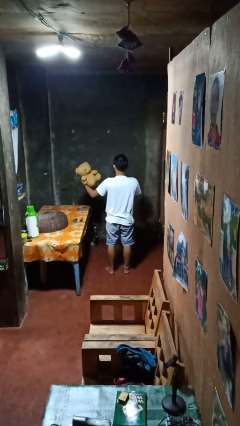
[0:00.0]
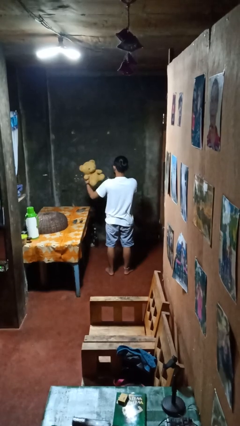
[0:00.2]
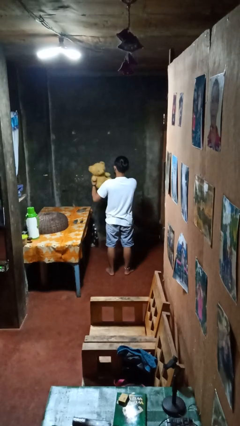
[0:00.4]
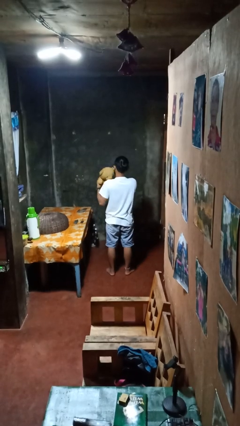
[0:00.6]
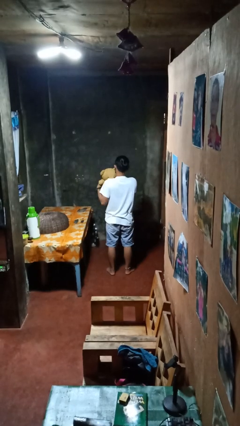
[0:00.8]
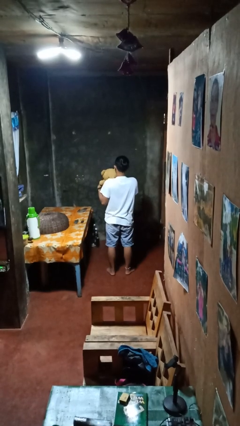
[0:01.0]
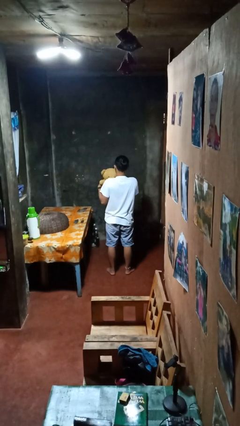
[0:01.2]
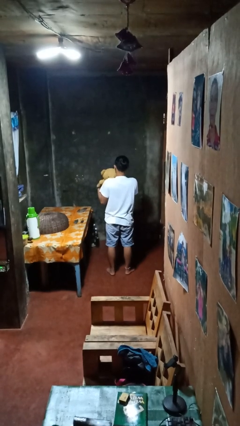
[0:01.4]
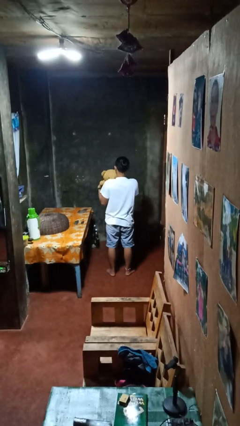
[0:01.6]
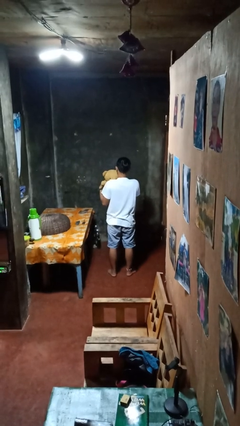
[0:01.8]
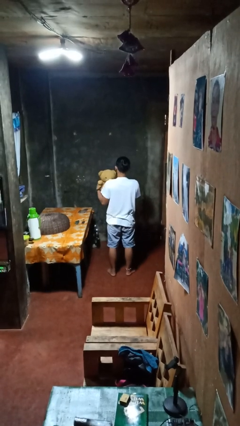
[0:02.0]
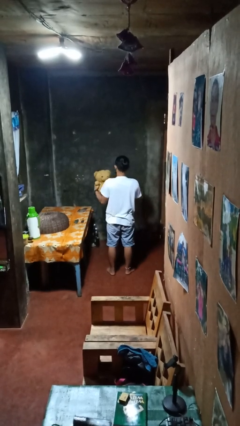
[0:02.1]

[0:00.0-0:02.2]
person hugs stuffed animal

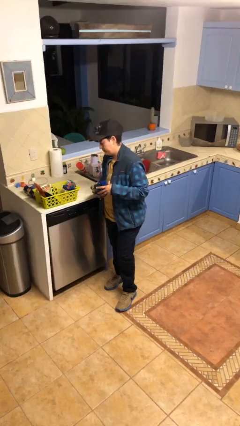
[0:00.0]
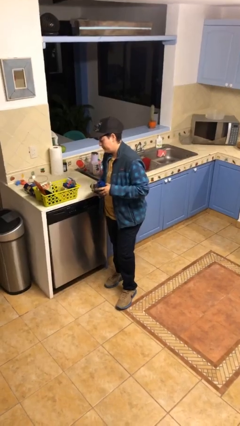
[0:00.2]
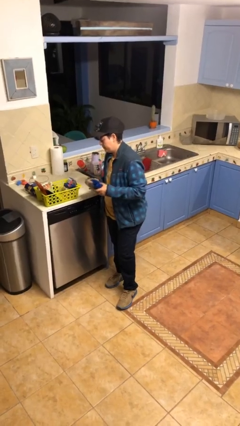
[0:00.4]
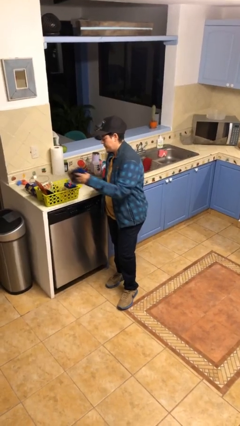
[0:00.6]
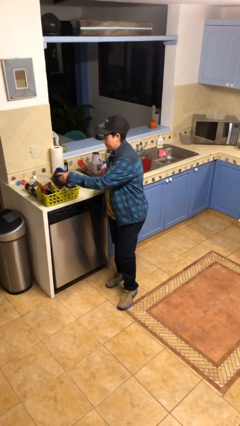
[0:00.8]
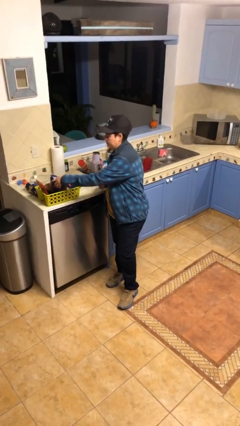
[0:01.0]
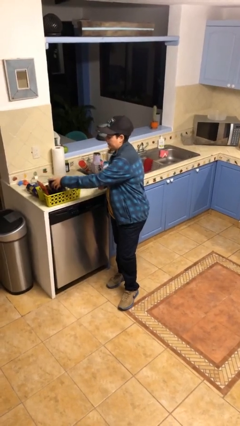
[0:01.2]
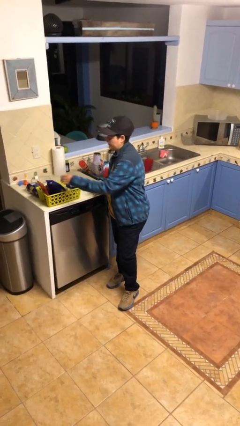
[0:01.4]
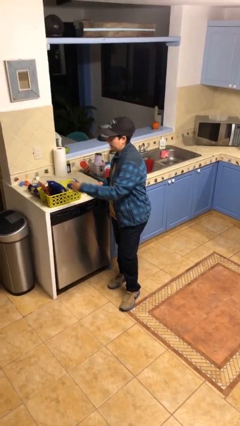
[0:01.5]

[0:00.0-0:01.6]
person puts object into basket

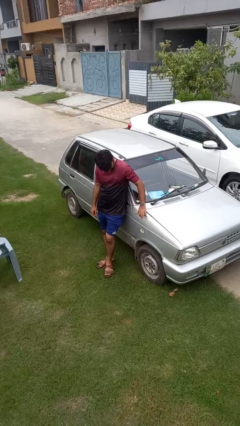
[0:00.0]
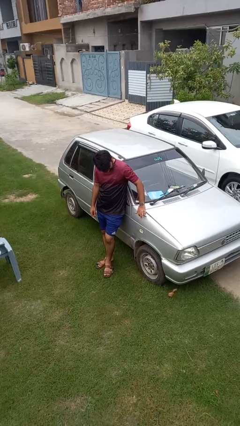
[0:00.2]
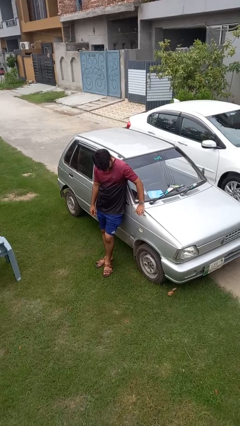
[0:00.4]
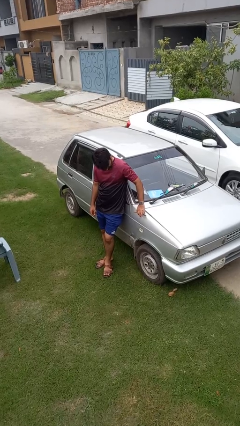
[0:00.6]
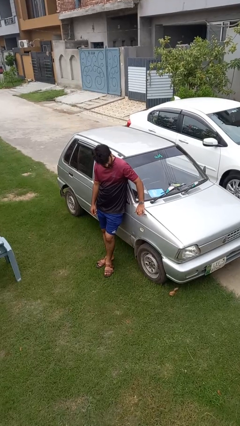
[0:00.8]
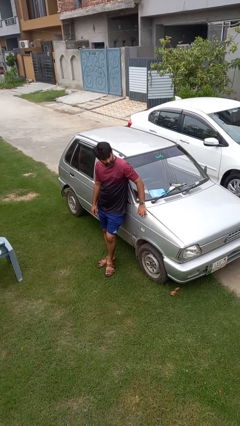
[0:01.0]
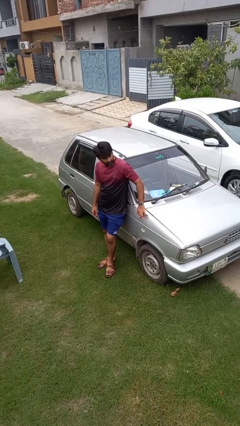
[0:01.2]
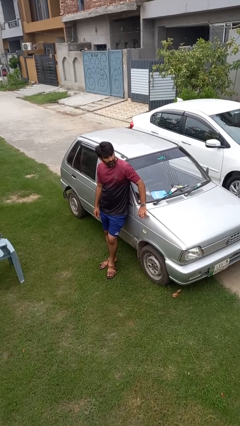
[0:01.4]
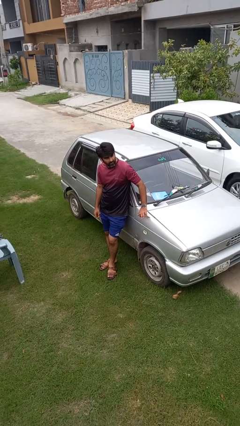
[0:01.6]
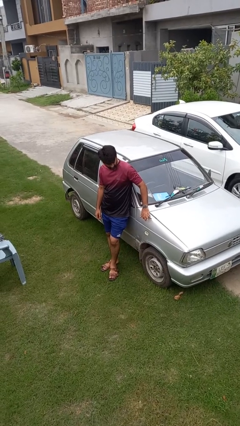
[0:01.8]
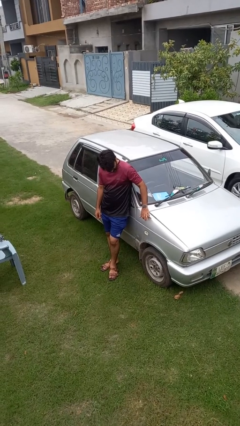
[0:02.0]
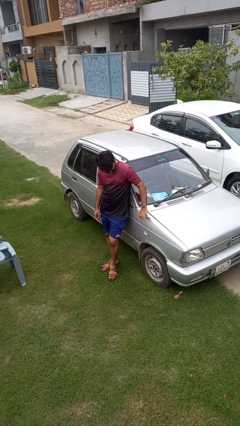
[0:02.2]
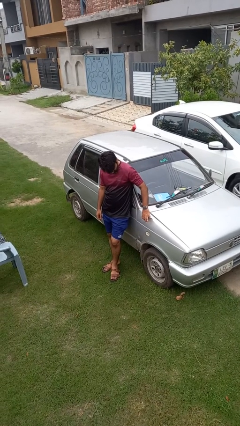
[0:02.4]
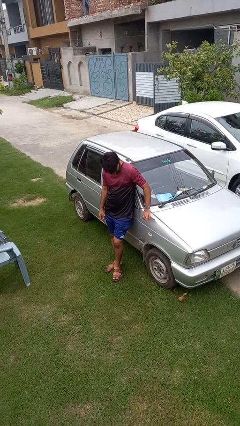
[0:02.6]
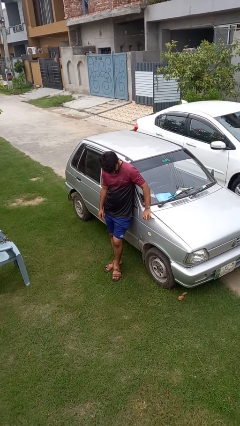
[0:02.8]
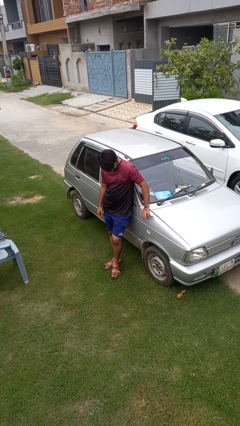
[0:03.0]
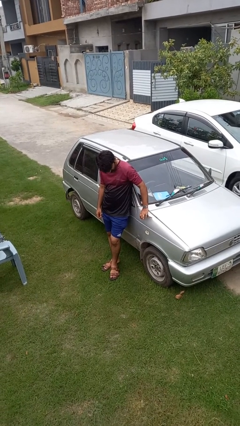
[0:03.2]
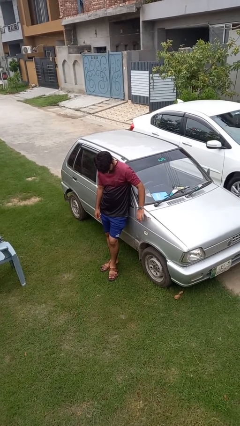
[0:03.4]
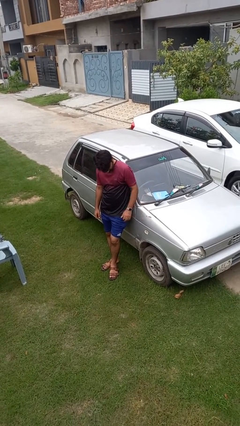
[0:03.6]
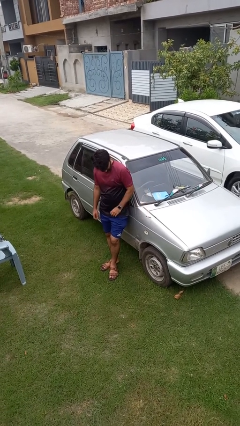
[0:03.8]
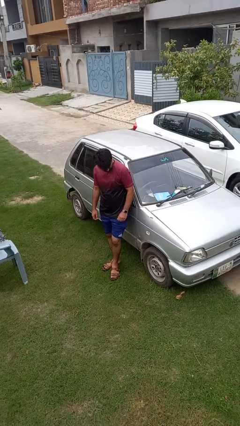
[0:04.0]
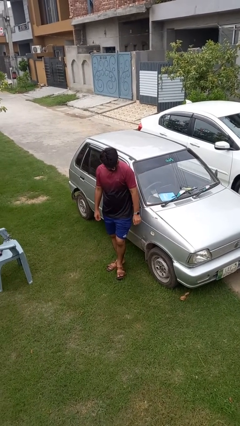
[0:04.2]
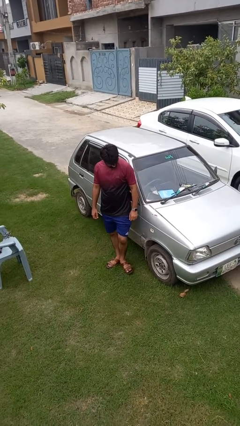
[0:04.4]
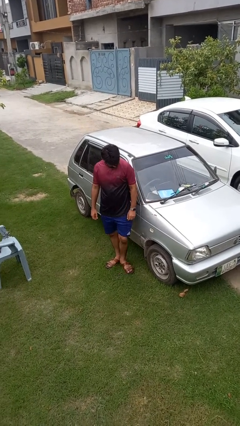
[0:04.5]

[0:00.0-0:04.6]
person taps object with finger

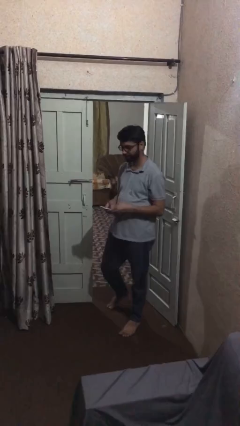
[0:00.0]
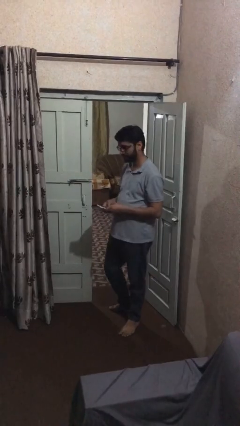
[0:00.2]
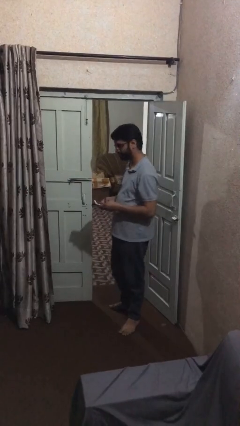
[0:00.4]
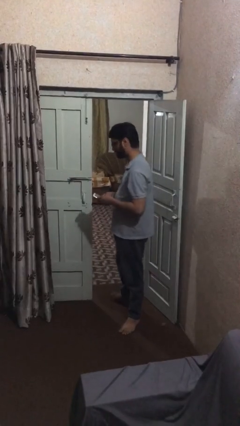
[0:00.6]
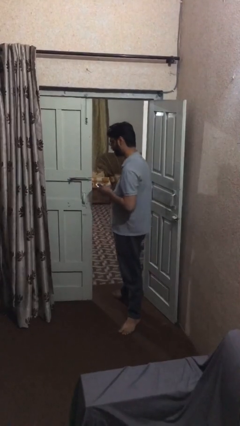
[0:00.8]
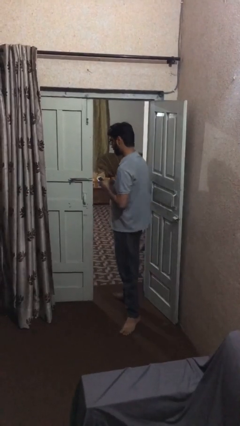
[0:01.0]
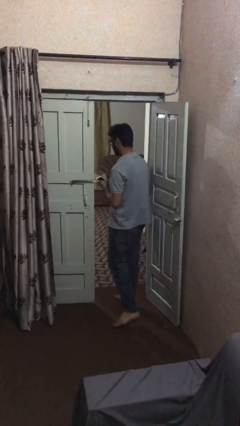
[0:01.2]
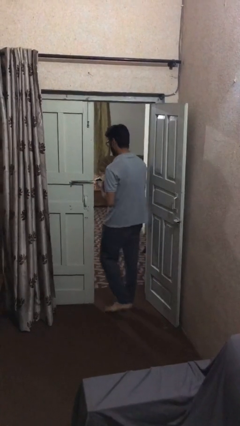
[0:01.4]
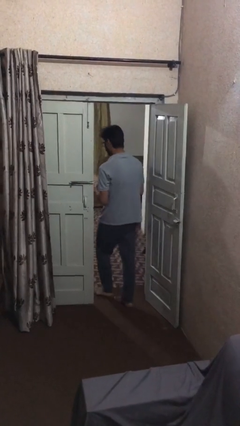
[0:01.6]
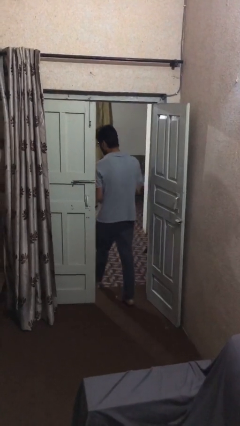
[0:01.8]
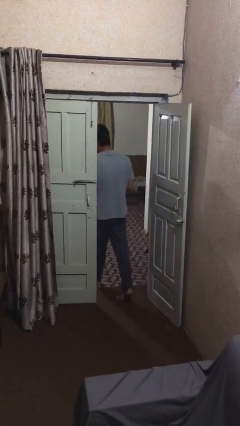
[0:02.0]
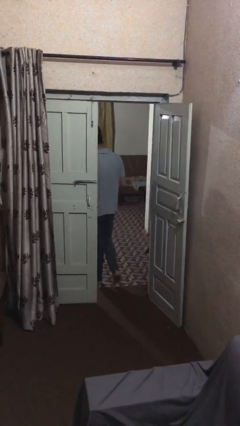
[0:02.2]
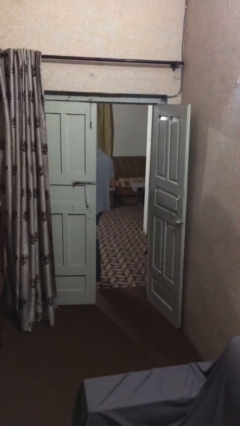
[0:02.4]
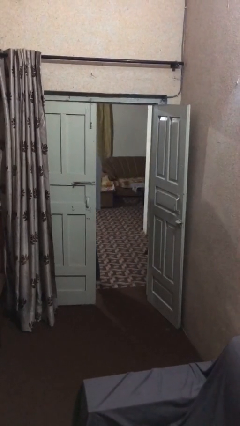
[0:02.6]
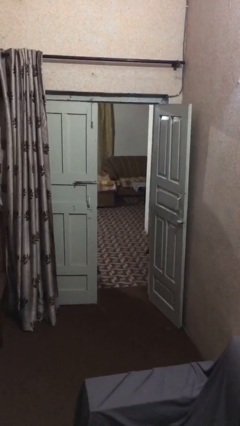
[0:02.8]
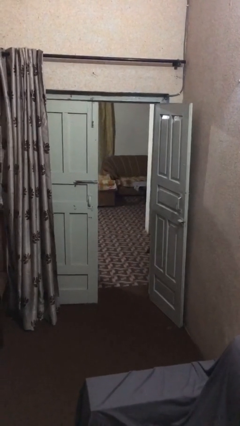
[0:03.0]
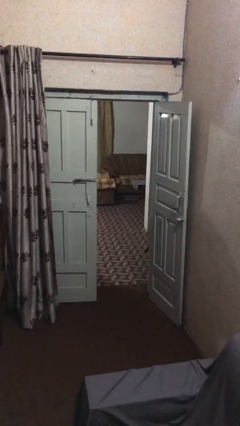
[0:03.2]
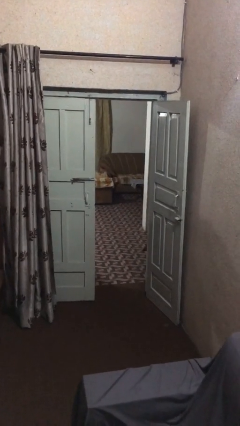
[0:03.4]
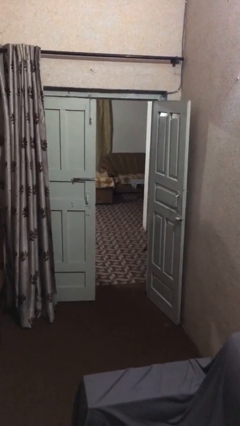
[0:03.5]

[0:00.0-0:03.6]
person exits scene through structure

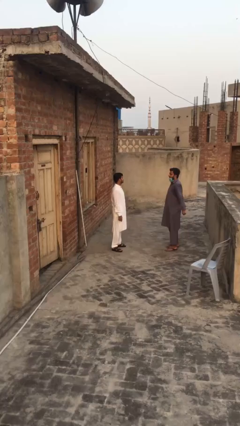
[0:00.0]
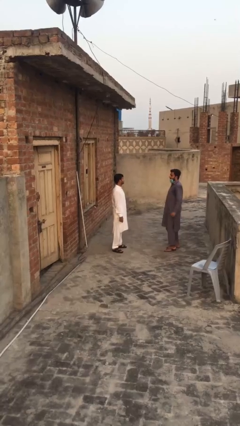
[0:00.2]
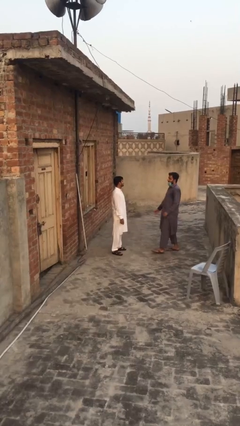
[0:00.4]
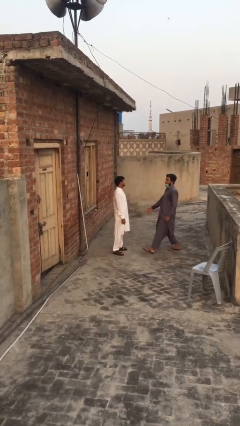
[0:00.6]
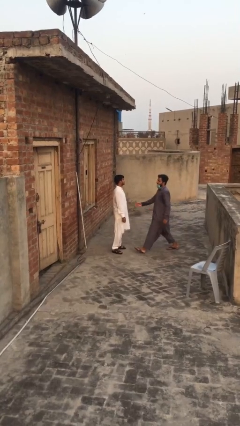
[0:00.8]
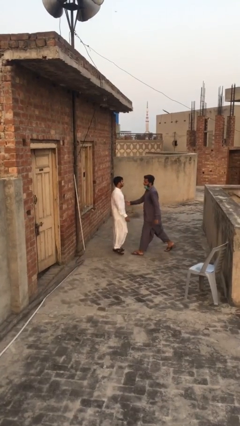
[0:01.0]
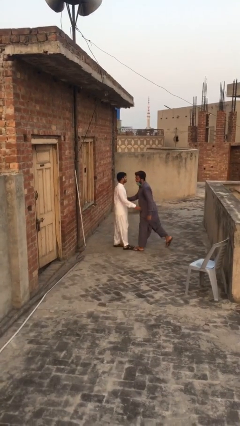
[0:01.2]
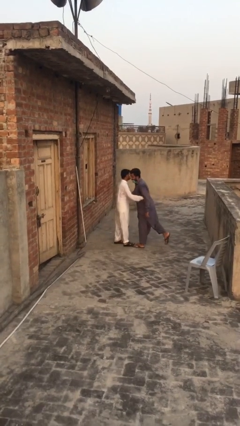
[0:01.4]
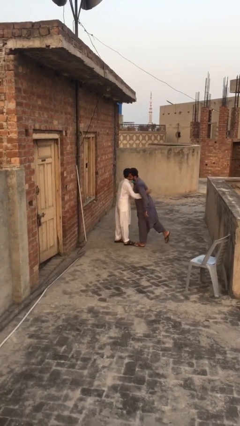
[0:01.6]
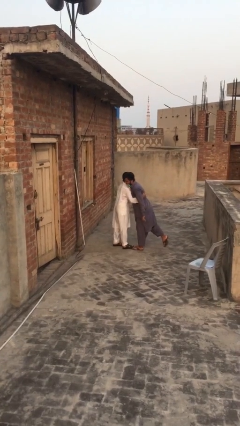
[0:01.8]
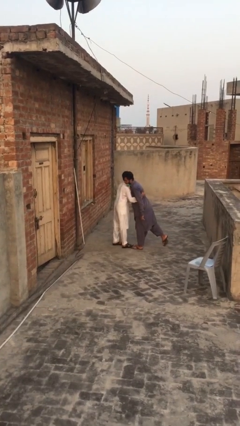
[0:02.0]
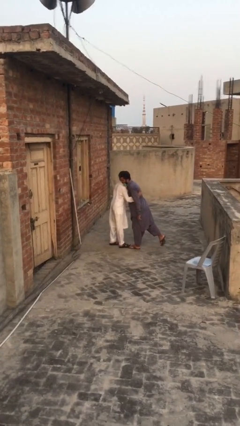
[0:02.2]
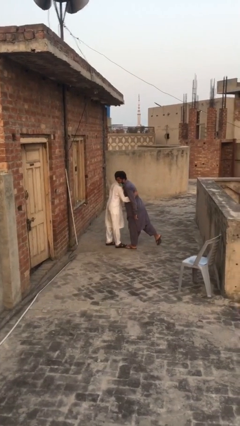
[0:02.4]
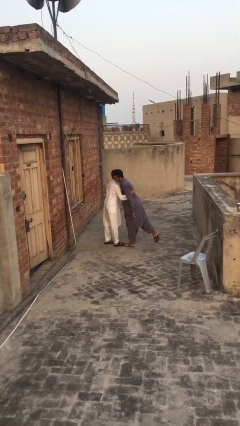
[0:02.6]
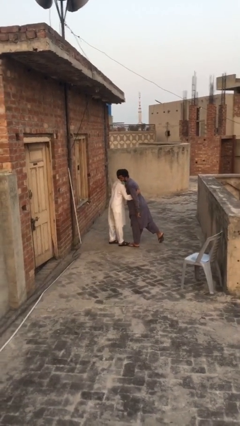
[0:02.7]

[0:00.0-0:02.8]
person embraces person

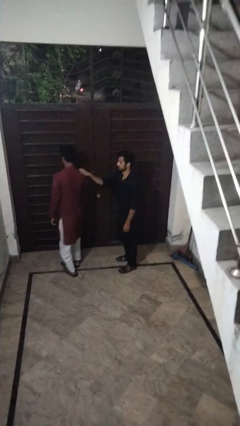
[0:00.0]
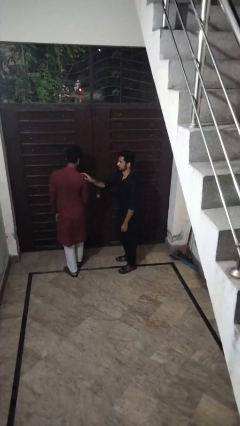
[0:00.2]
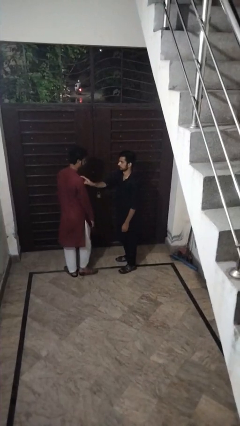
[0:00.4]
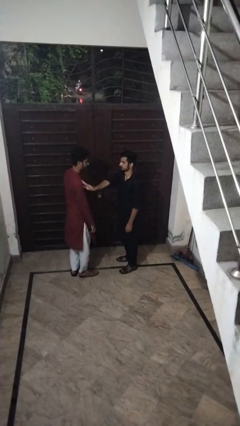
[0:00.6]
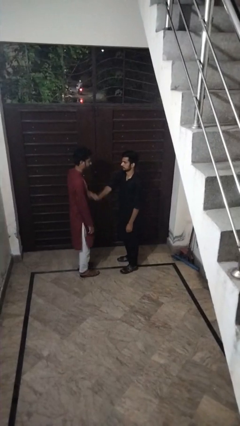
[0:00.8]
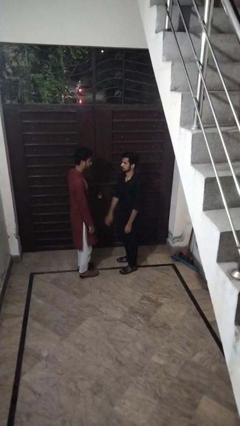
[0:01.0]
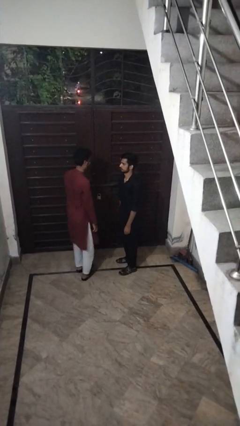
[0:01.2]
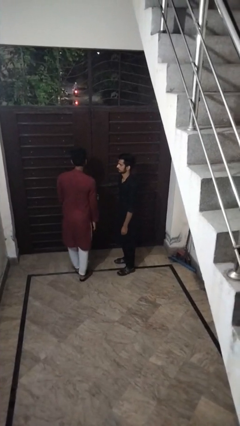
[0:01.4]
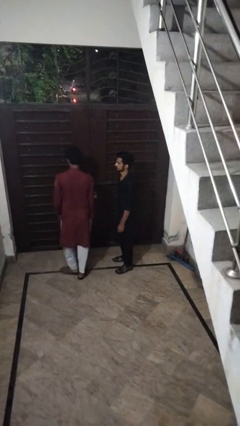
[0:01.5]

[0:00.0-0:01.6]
person spins person around

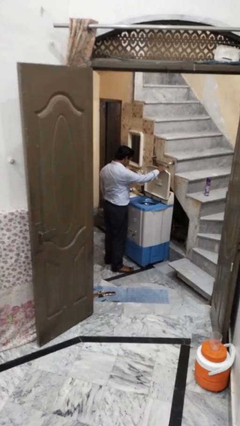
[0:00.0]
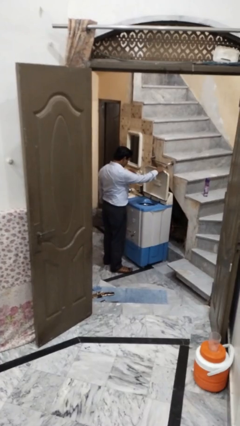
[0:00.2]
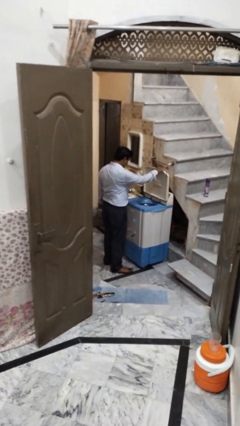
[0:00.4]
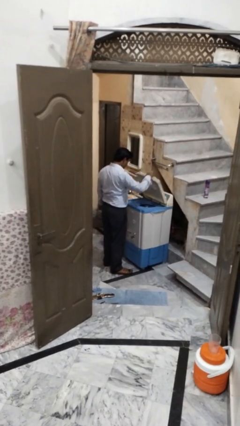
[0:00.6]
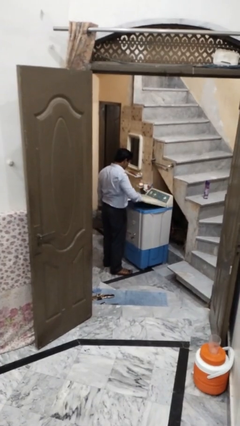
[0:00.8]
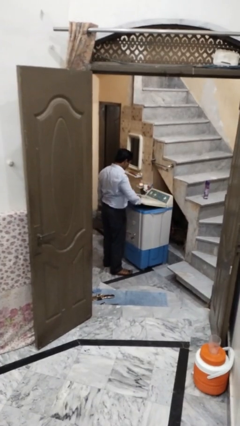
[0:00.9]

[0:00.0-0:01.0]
person closes clothes washer
